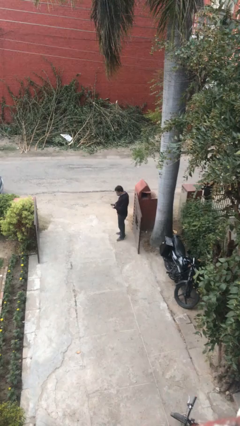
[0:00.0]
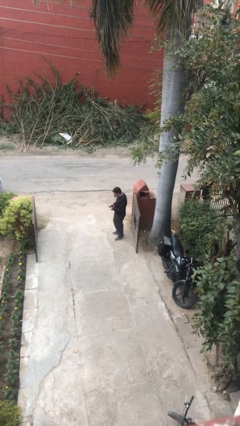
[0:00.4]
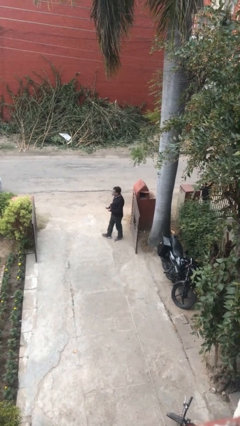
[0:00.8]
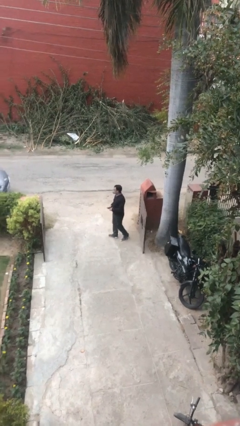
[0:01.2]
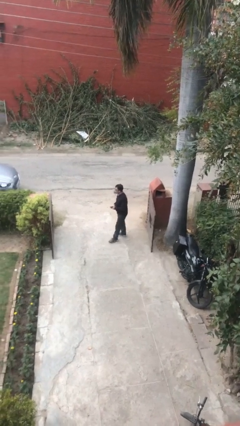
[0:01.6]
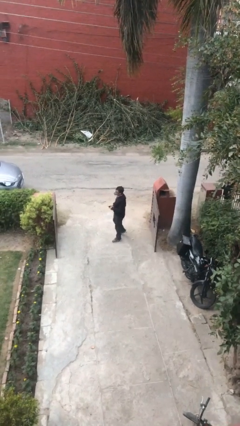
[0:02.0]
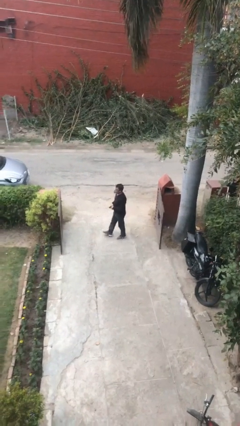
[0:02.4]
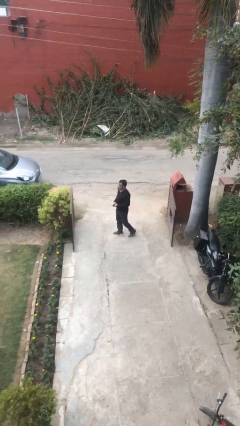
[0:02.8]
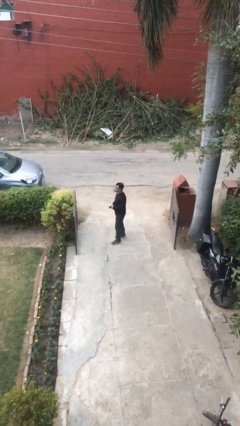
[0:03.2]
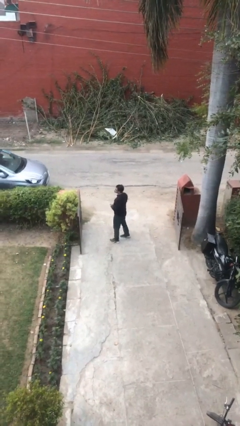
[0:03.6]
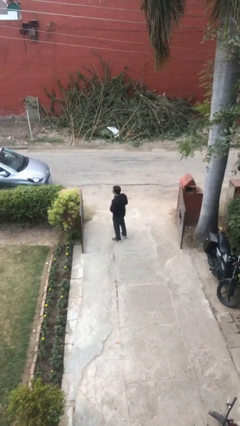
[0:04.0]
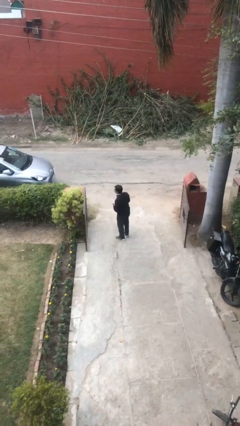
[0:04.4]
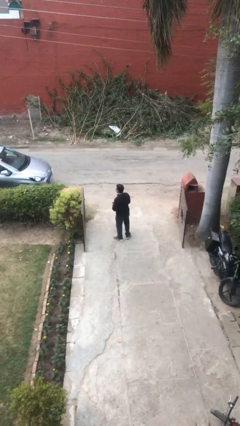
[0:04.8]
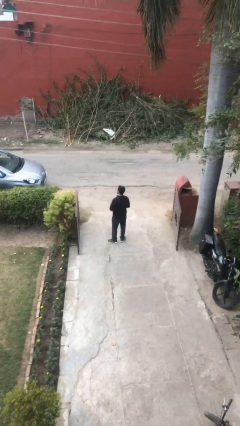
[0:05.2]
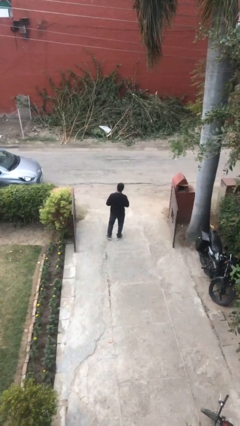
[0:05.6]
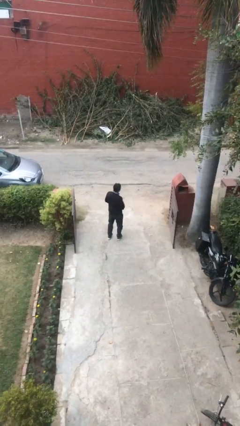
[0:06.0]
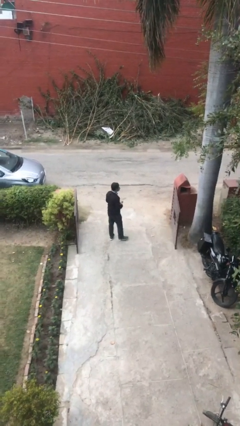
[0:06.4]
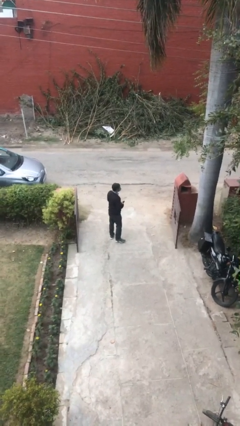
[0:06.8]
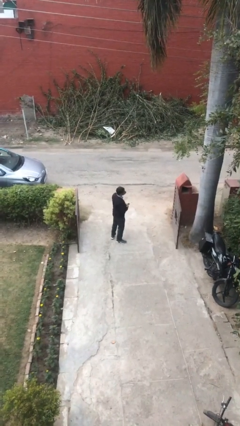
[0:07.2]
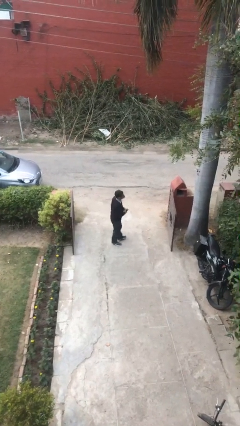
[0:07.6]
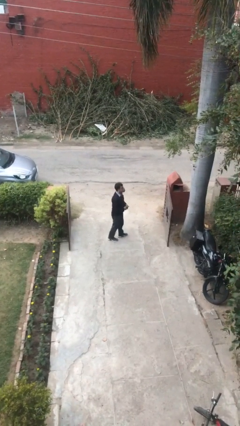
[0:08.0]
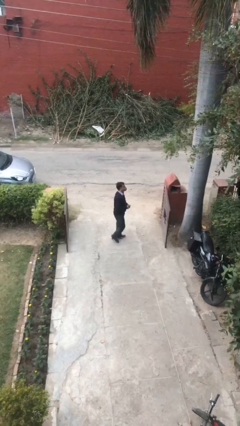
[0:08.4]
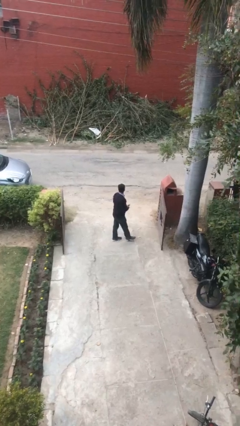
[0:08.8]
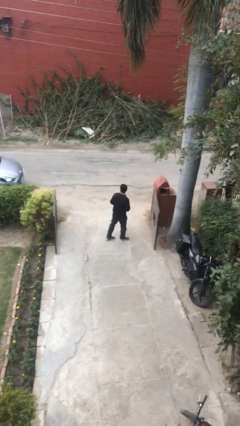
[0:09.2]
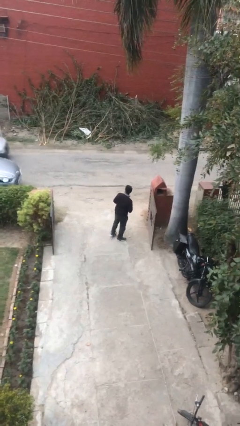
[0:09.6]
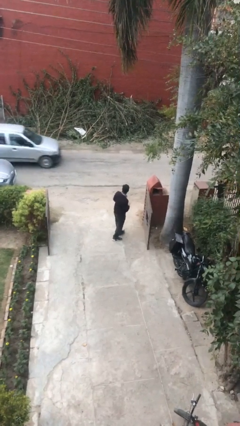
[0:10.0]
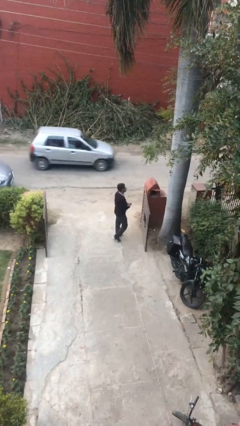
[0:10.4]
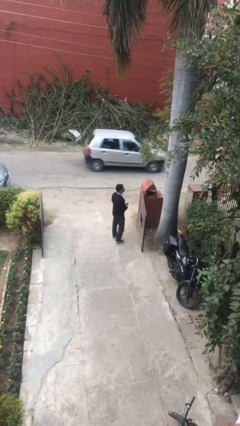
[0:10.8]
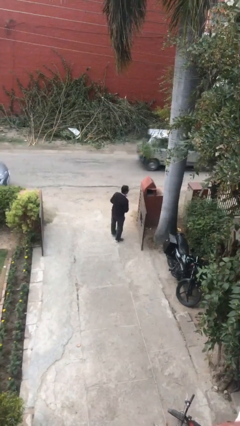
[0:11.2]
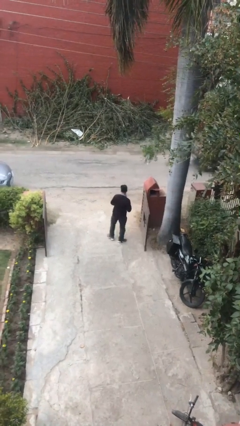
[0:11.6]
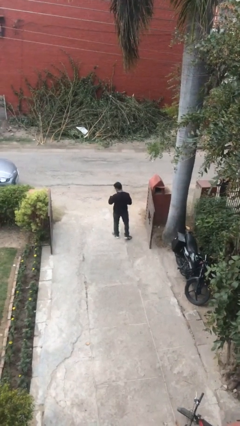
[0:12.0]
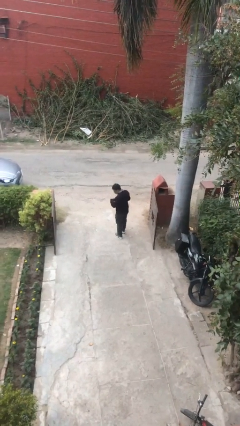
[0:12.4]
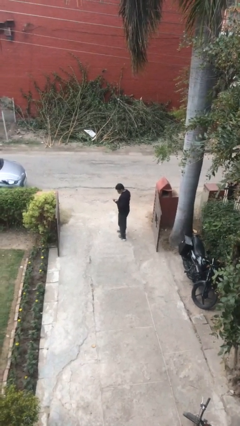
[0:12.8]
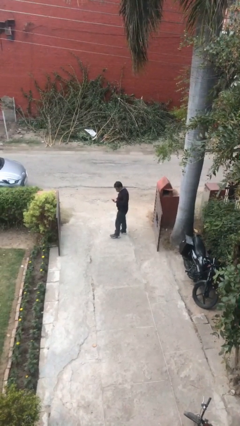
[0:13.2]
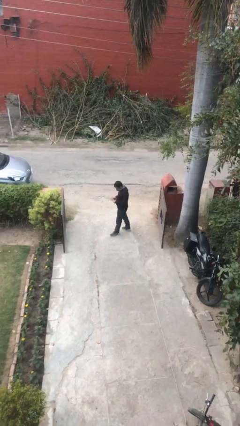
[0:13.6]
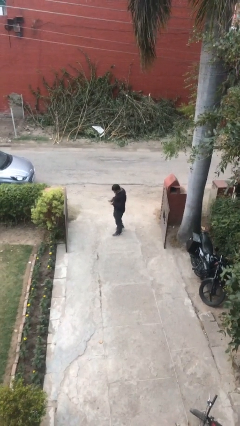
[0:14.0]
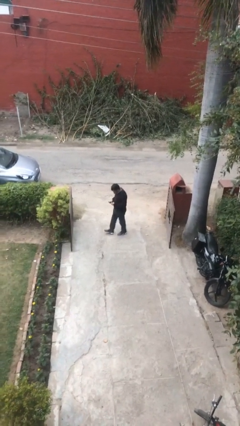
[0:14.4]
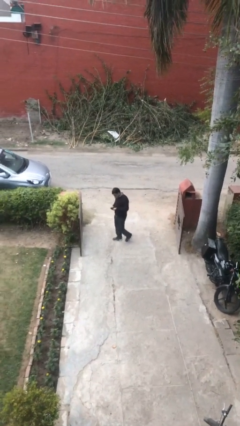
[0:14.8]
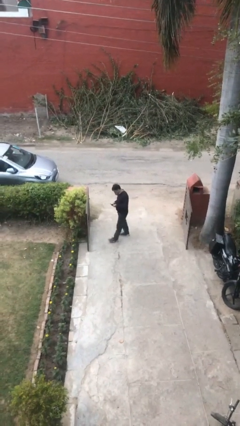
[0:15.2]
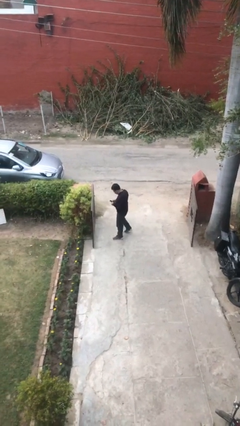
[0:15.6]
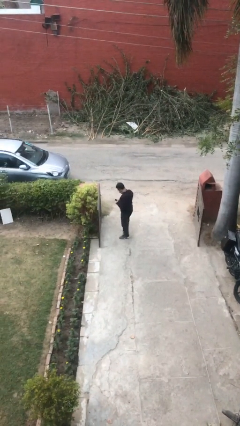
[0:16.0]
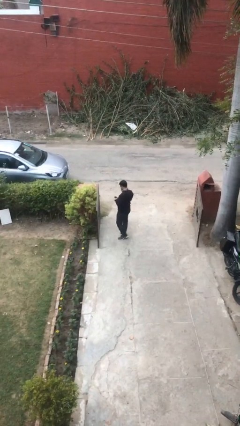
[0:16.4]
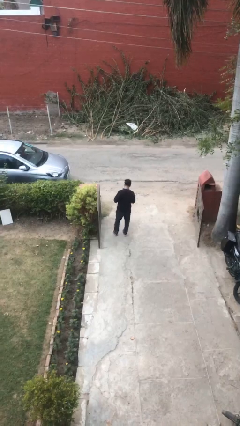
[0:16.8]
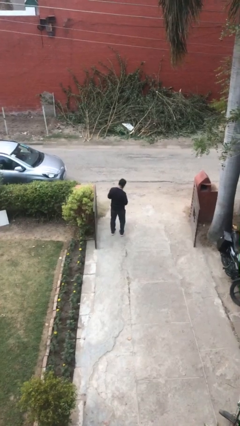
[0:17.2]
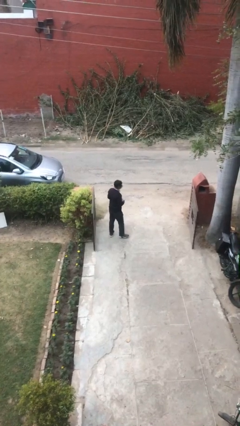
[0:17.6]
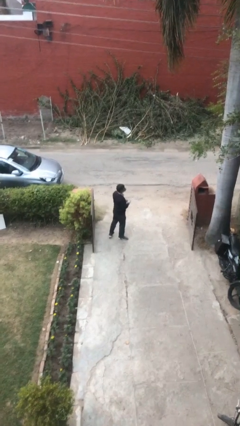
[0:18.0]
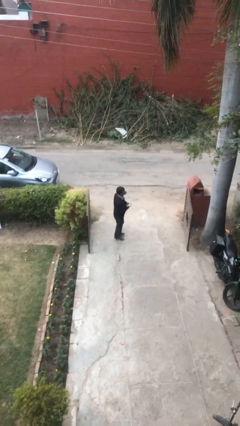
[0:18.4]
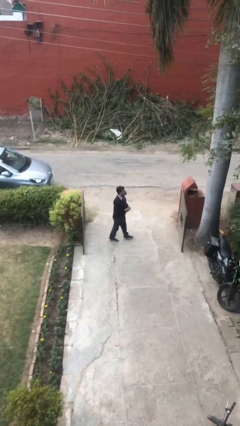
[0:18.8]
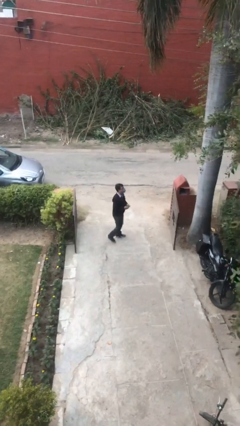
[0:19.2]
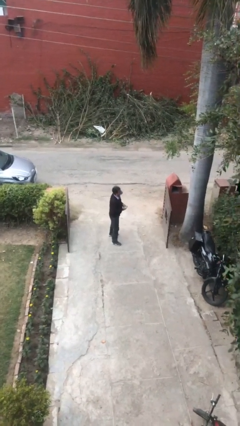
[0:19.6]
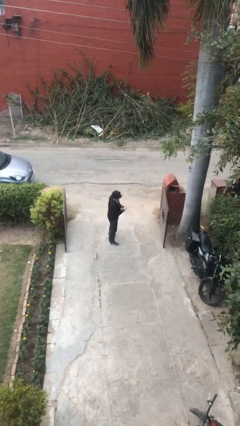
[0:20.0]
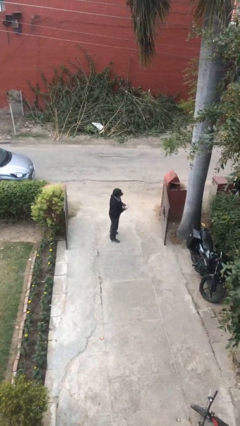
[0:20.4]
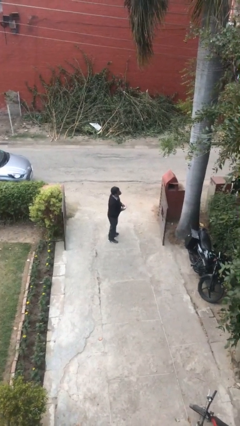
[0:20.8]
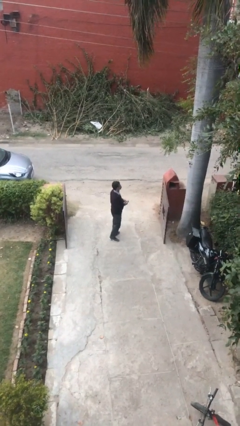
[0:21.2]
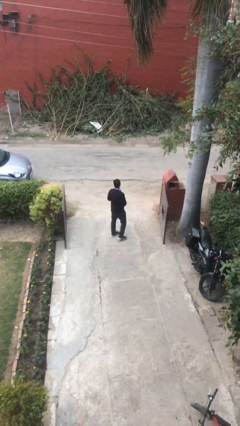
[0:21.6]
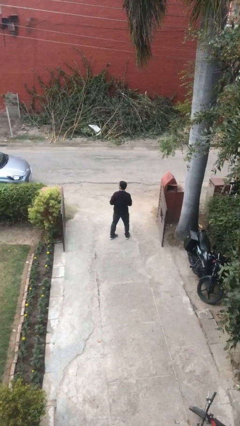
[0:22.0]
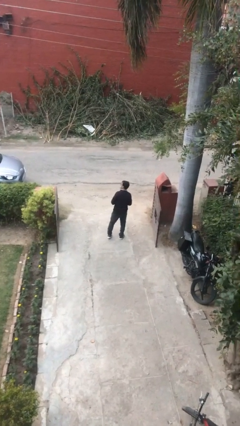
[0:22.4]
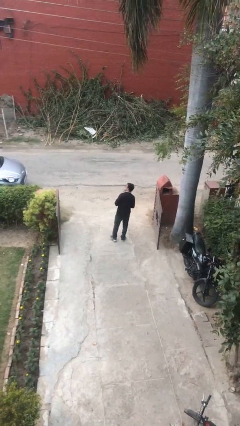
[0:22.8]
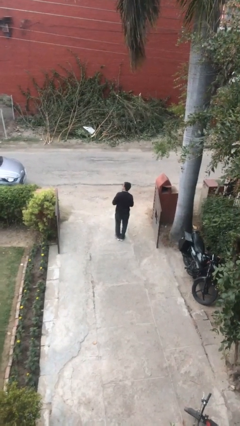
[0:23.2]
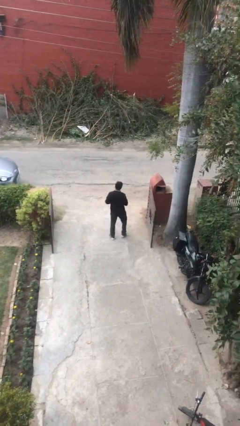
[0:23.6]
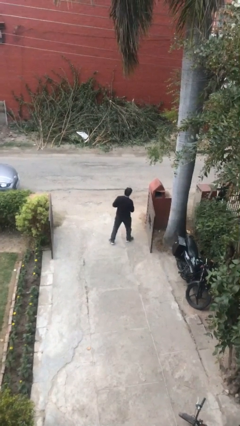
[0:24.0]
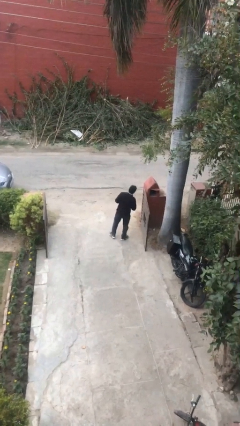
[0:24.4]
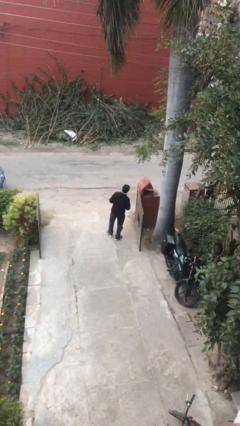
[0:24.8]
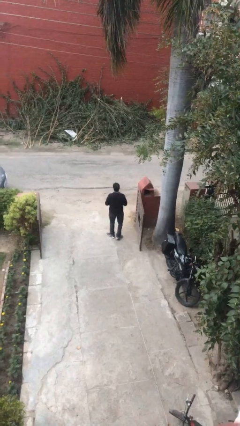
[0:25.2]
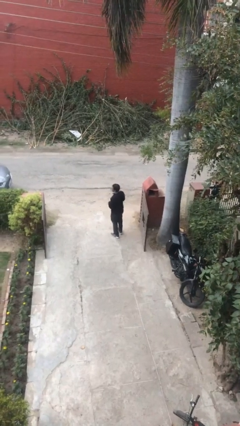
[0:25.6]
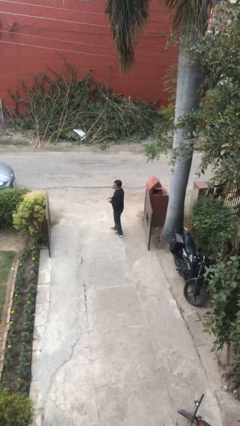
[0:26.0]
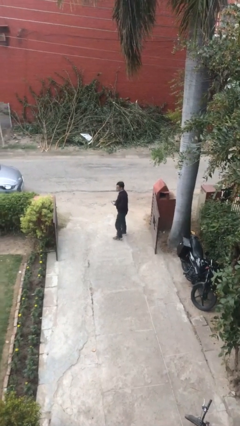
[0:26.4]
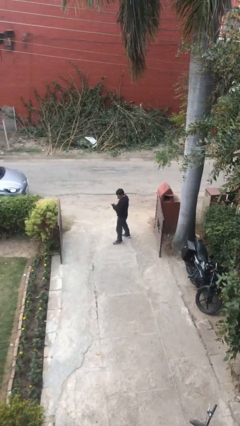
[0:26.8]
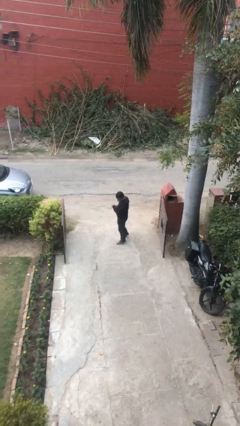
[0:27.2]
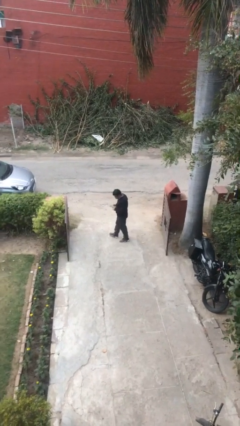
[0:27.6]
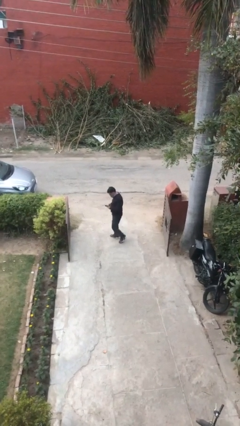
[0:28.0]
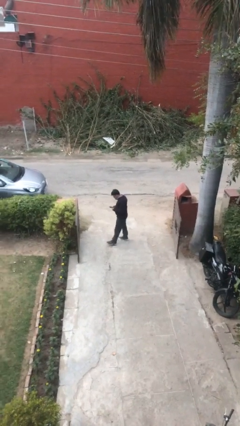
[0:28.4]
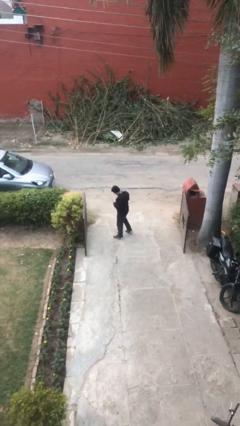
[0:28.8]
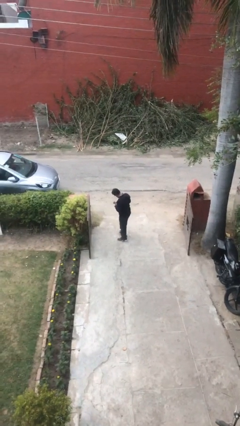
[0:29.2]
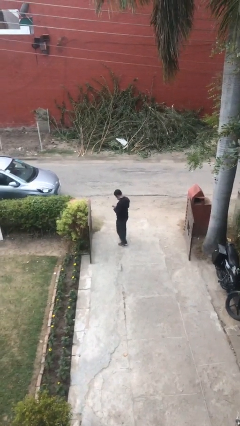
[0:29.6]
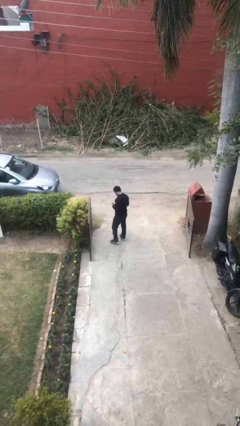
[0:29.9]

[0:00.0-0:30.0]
person walks

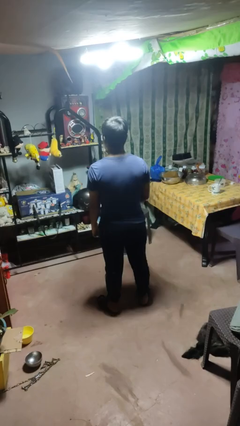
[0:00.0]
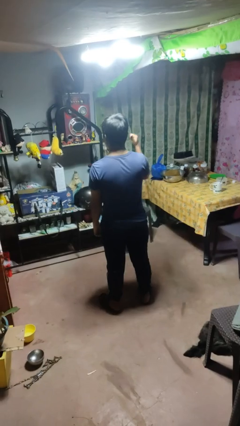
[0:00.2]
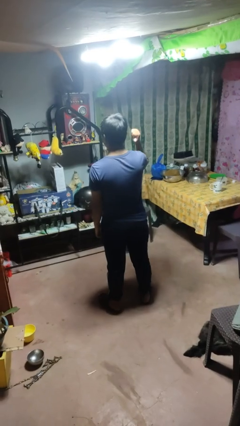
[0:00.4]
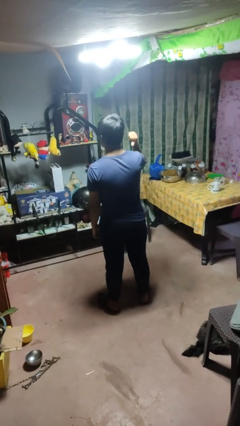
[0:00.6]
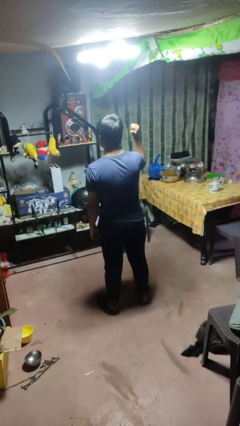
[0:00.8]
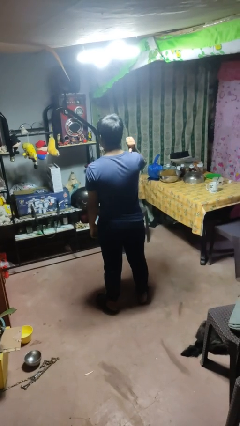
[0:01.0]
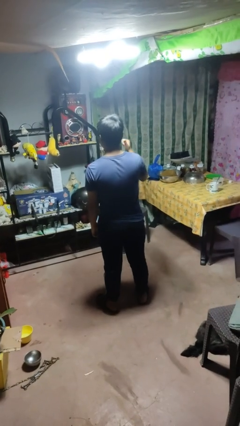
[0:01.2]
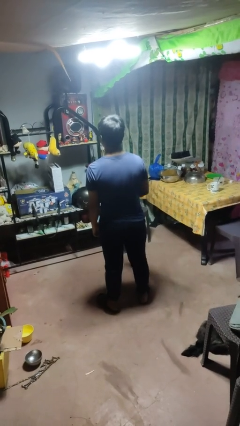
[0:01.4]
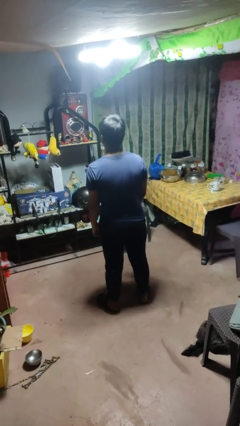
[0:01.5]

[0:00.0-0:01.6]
person gestures behind me

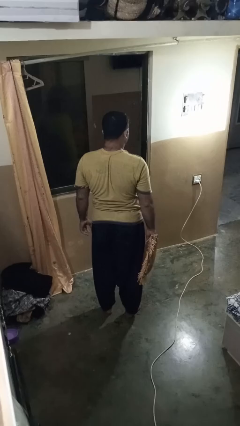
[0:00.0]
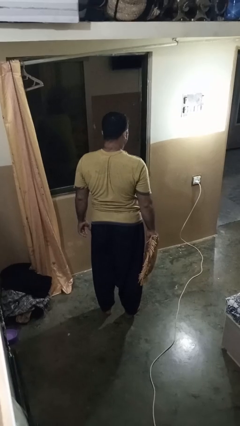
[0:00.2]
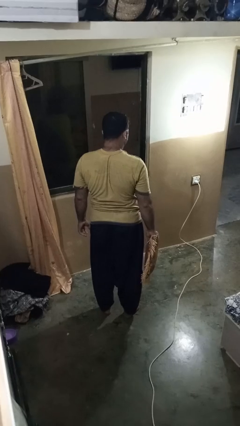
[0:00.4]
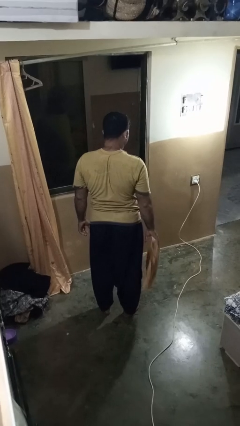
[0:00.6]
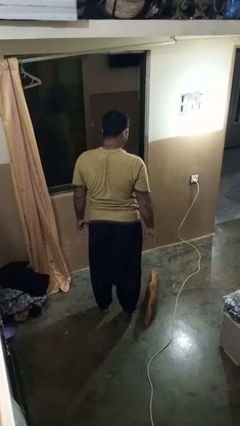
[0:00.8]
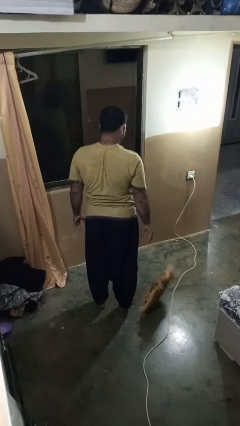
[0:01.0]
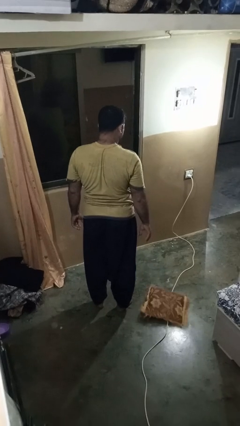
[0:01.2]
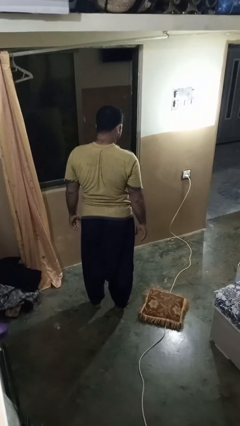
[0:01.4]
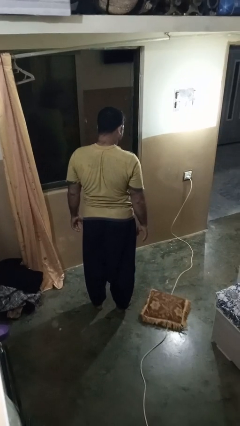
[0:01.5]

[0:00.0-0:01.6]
person drops object
